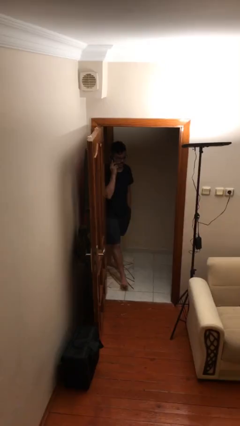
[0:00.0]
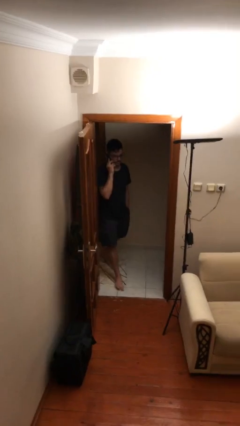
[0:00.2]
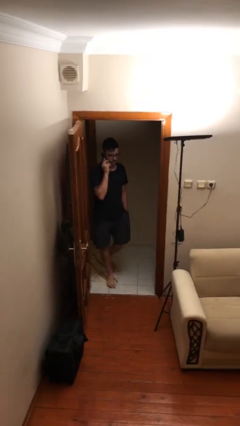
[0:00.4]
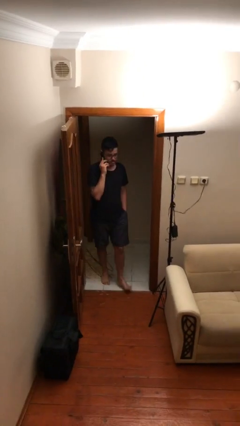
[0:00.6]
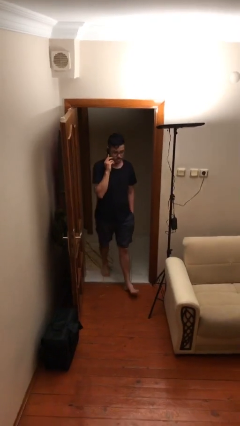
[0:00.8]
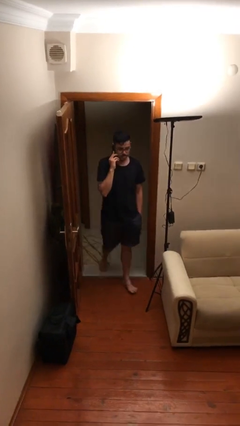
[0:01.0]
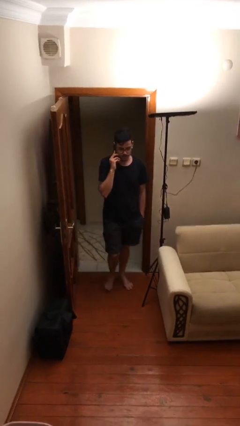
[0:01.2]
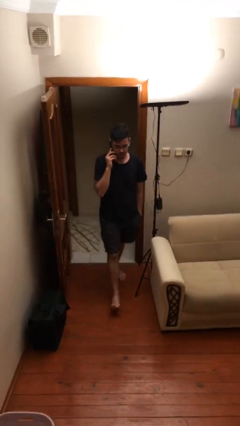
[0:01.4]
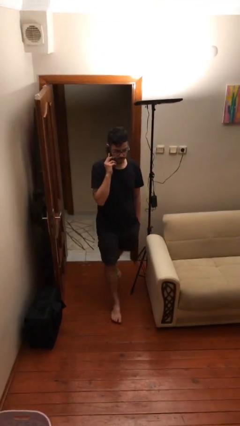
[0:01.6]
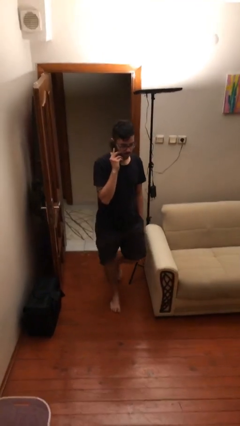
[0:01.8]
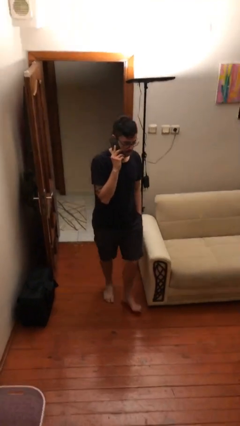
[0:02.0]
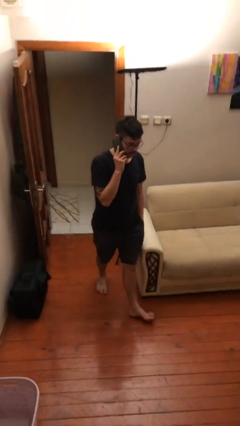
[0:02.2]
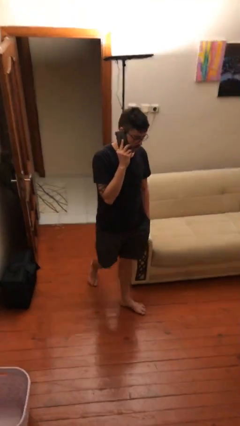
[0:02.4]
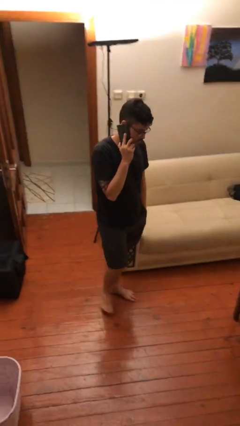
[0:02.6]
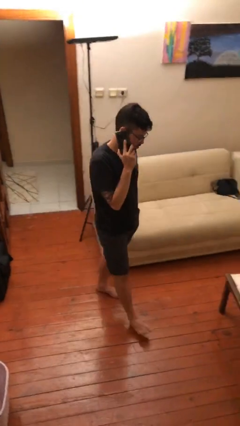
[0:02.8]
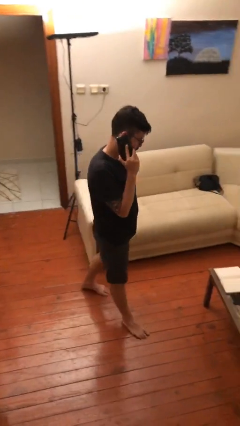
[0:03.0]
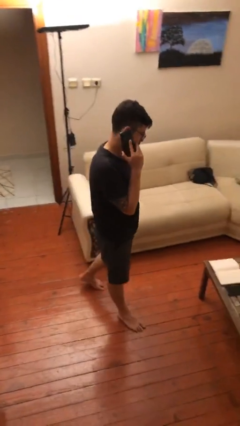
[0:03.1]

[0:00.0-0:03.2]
person enters scene through structure

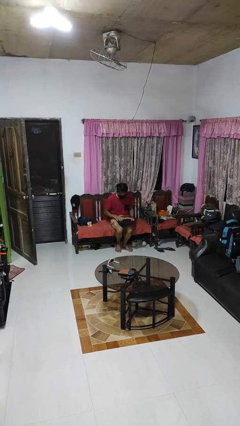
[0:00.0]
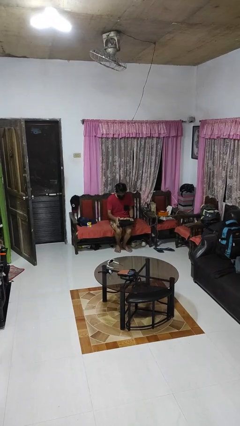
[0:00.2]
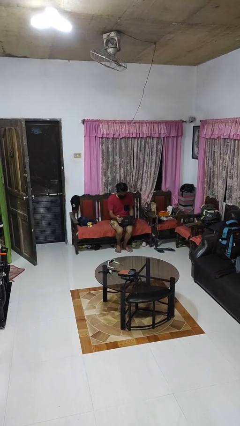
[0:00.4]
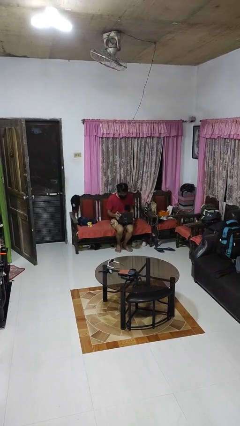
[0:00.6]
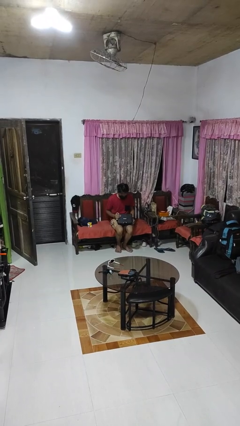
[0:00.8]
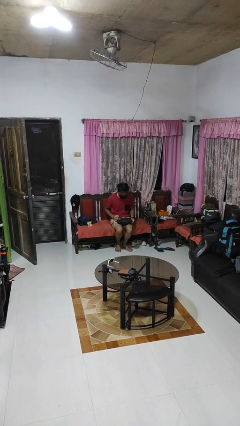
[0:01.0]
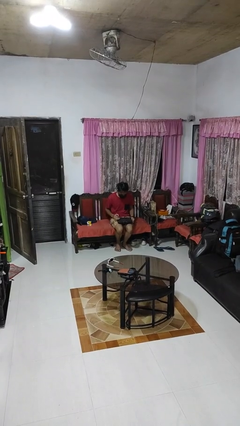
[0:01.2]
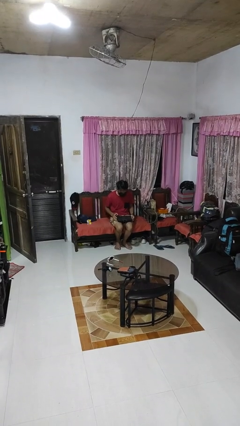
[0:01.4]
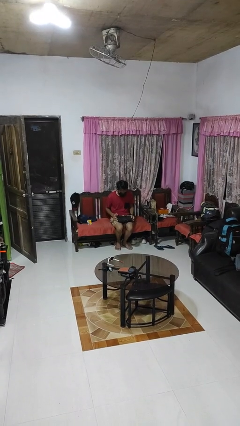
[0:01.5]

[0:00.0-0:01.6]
person closes laptop

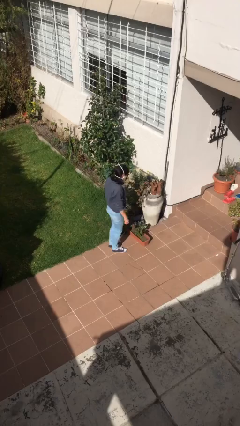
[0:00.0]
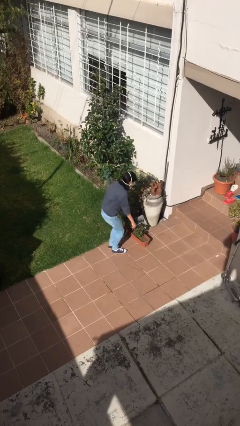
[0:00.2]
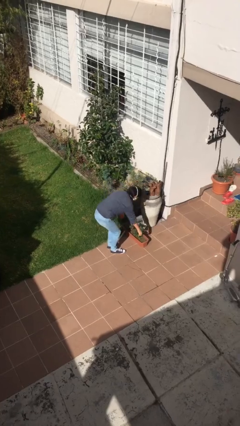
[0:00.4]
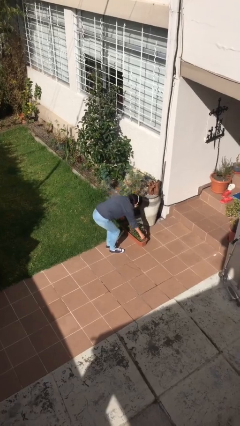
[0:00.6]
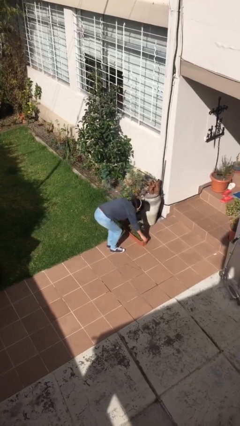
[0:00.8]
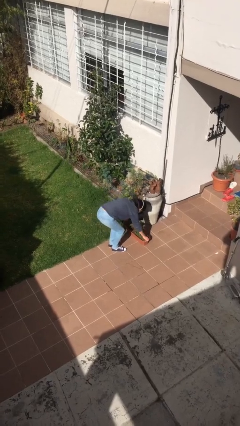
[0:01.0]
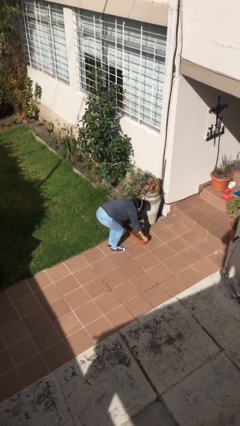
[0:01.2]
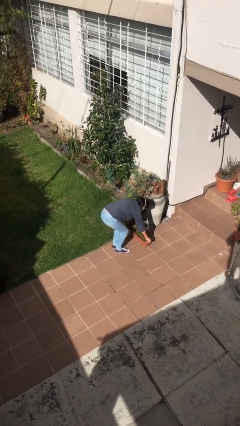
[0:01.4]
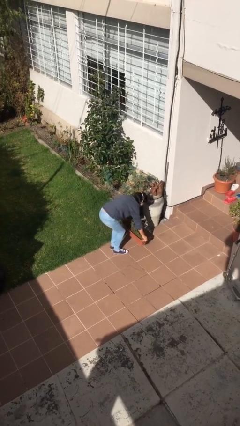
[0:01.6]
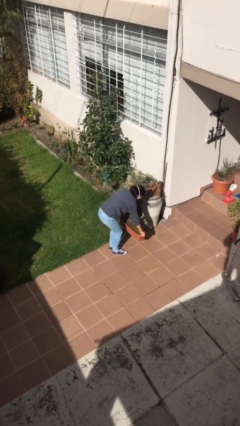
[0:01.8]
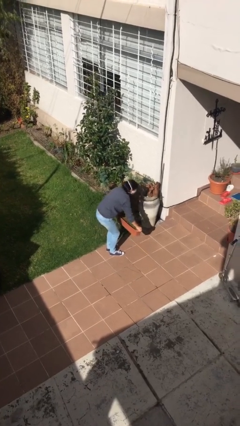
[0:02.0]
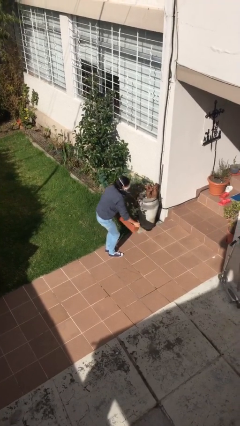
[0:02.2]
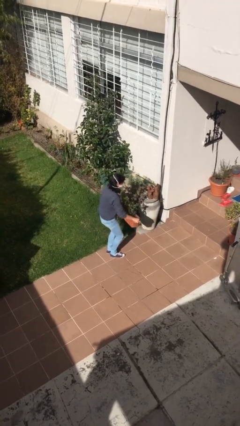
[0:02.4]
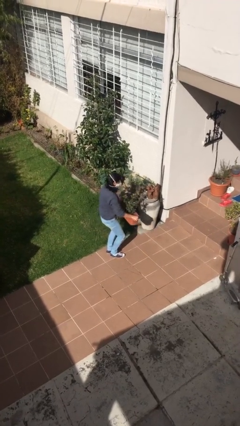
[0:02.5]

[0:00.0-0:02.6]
person picks up object from floor

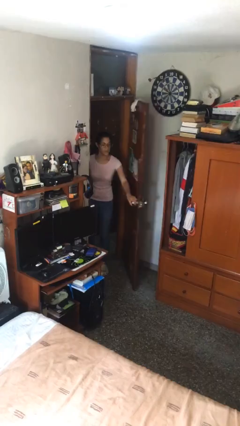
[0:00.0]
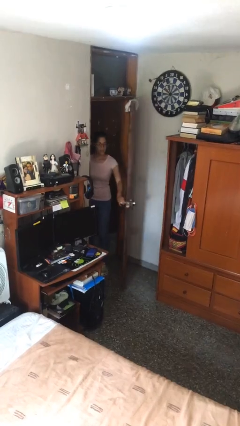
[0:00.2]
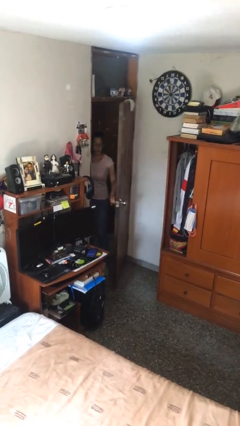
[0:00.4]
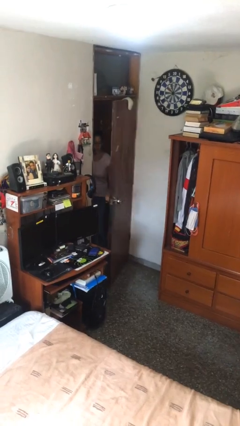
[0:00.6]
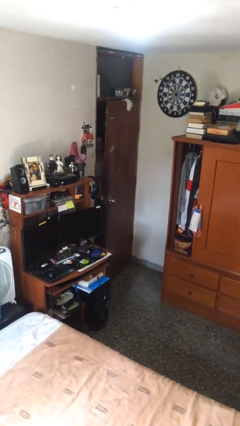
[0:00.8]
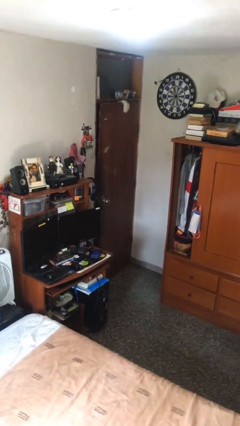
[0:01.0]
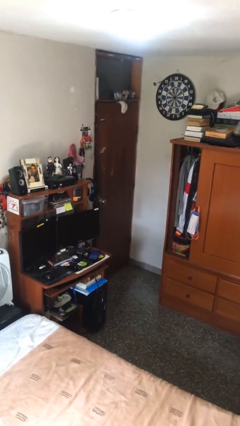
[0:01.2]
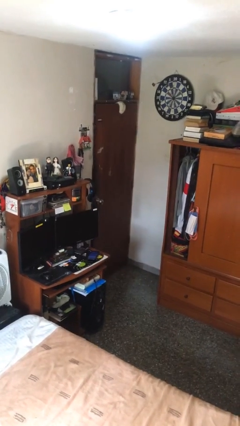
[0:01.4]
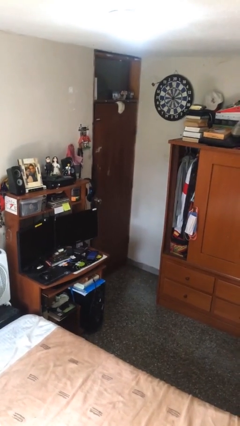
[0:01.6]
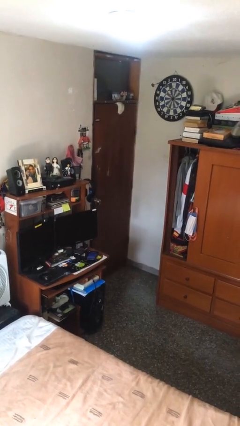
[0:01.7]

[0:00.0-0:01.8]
person closes facility door

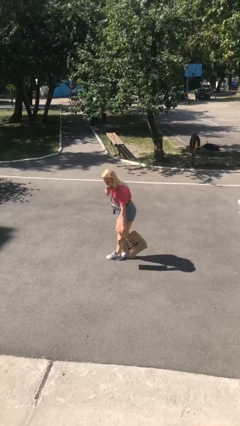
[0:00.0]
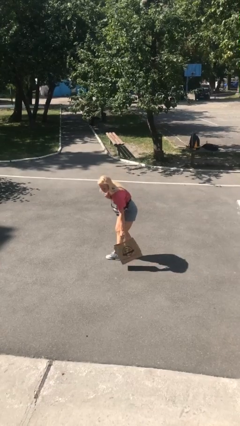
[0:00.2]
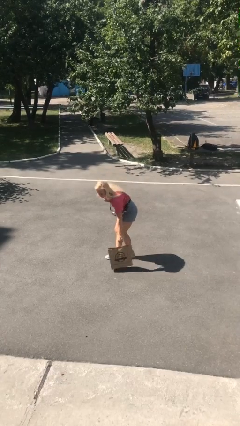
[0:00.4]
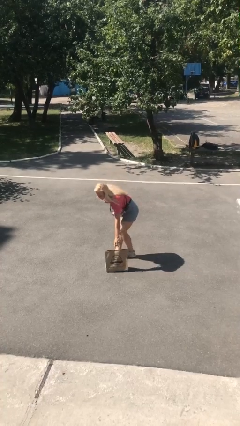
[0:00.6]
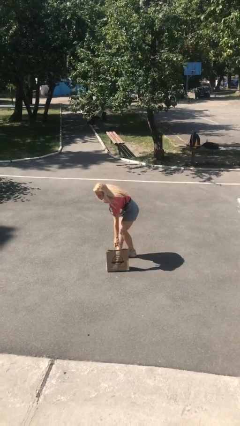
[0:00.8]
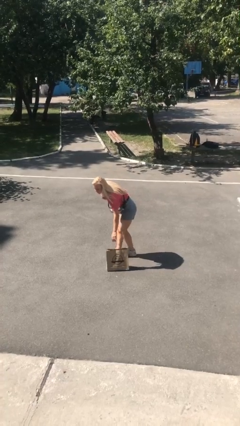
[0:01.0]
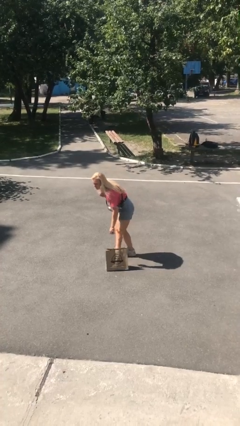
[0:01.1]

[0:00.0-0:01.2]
person puts down object on floor

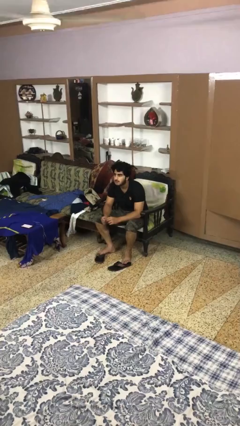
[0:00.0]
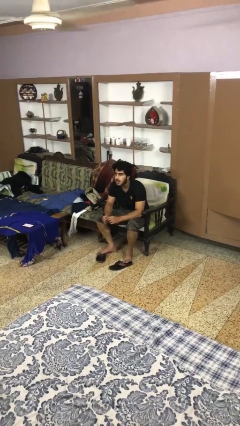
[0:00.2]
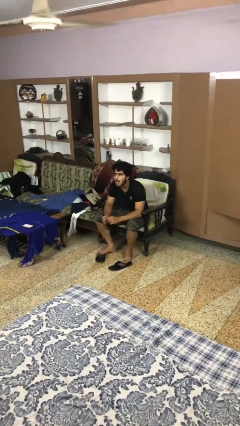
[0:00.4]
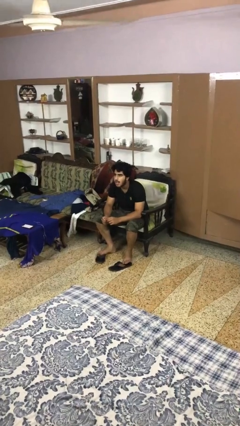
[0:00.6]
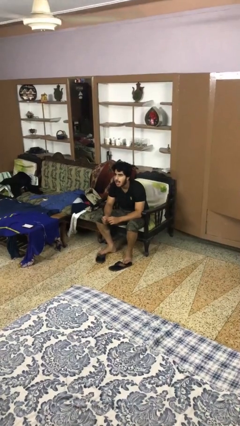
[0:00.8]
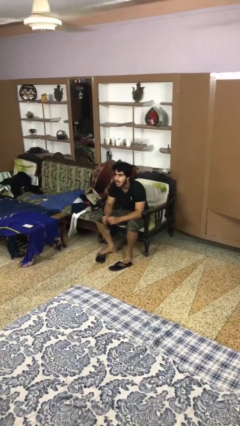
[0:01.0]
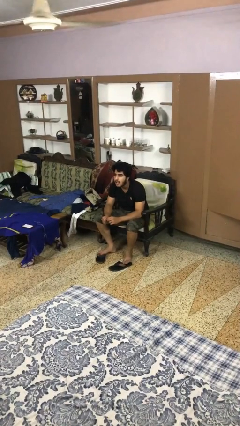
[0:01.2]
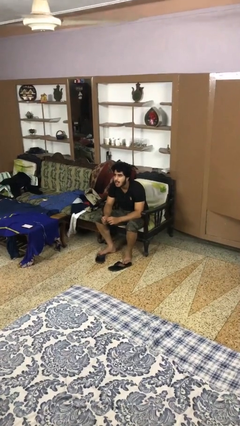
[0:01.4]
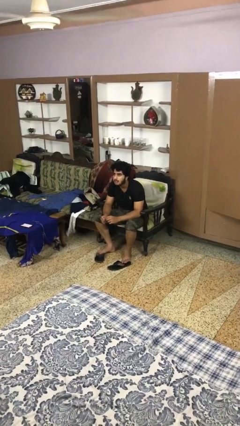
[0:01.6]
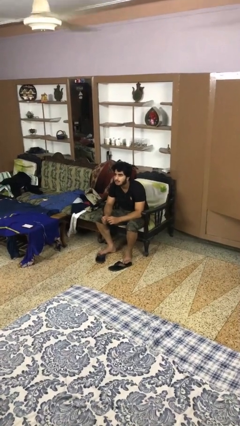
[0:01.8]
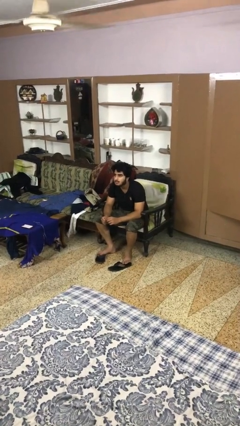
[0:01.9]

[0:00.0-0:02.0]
person sticks out tongue

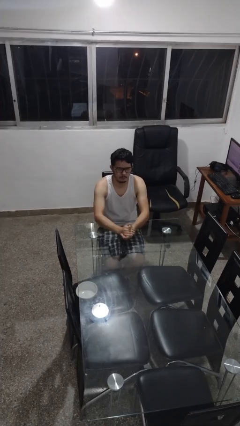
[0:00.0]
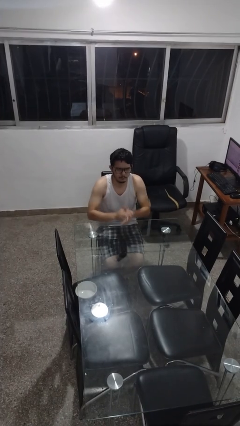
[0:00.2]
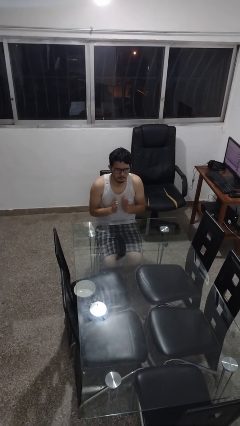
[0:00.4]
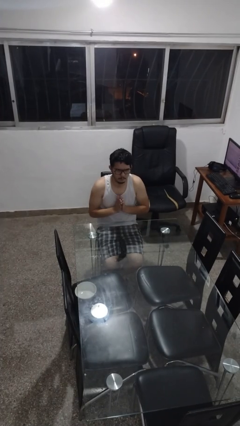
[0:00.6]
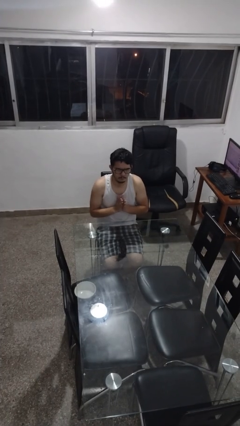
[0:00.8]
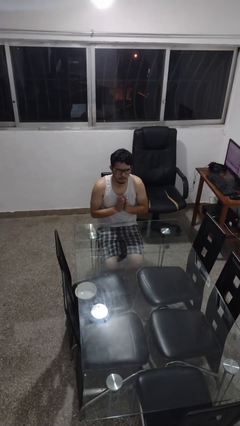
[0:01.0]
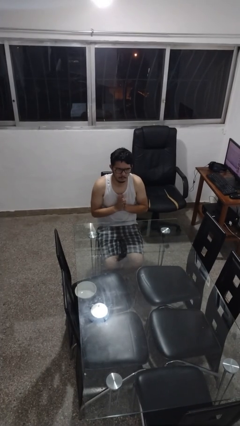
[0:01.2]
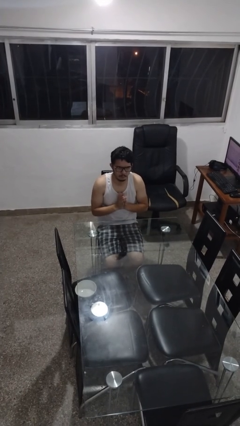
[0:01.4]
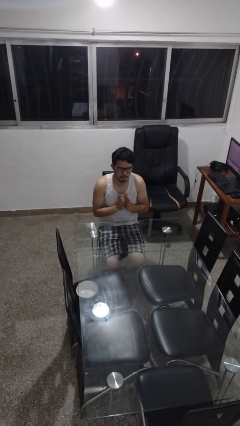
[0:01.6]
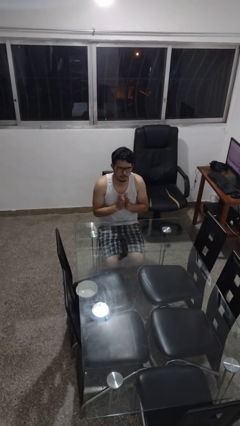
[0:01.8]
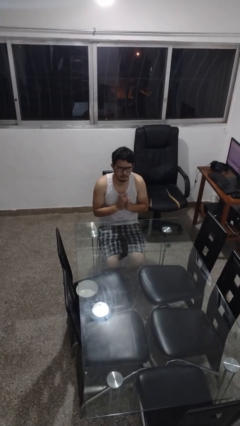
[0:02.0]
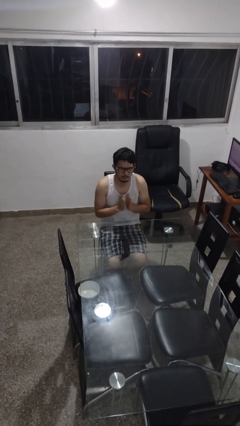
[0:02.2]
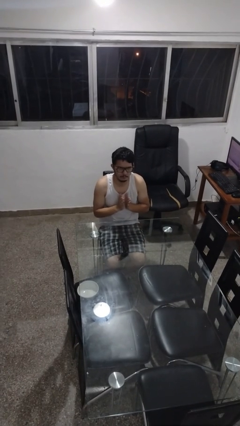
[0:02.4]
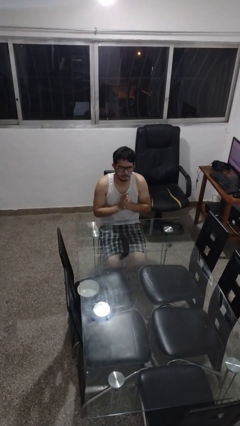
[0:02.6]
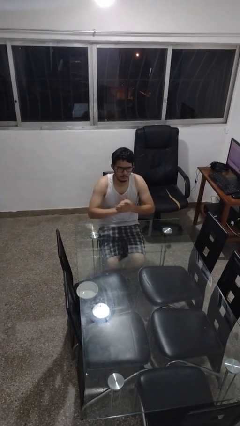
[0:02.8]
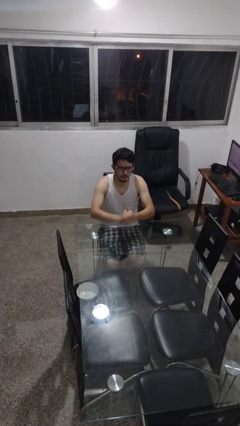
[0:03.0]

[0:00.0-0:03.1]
person claps hands

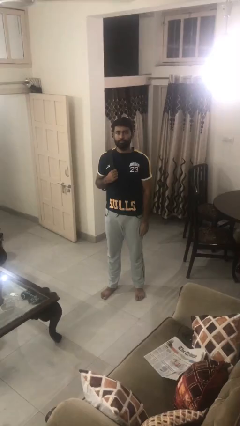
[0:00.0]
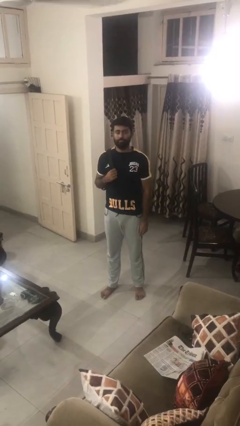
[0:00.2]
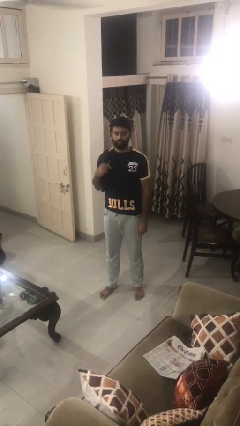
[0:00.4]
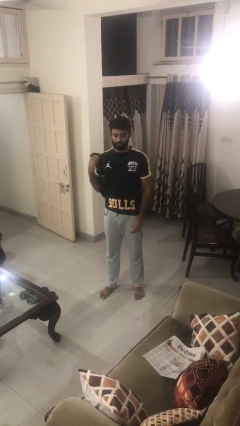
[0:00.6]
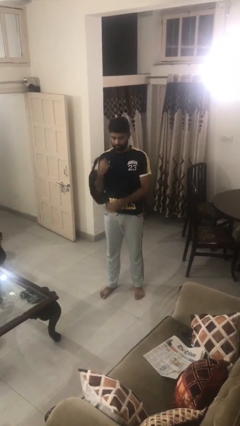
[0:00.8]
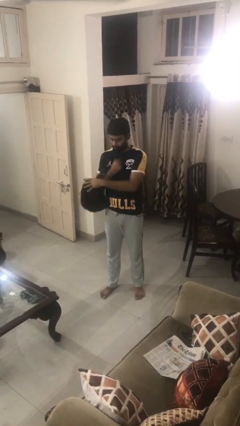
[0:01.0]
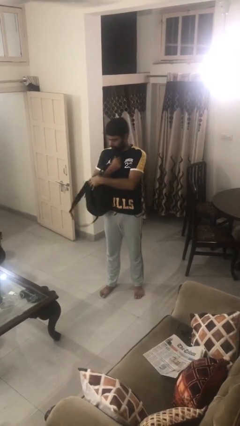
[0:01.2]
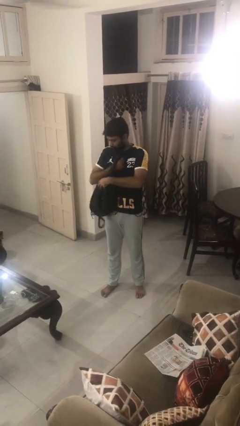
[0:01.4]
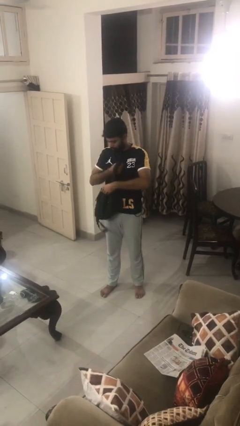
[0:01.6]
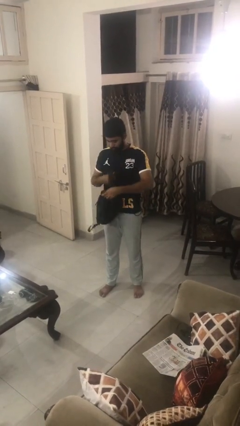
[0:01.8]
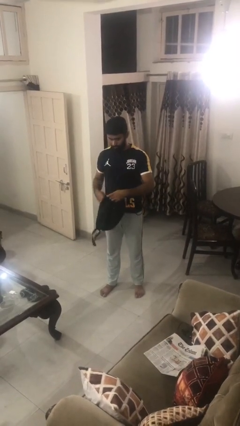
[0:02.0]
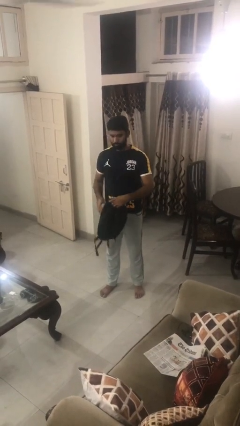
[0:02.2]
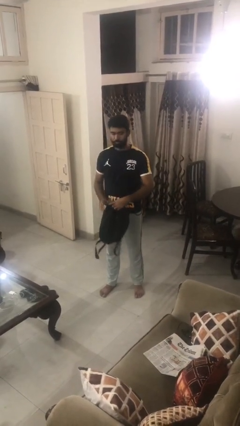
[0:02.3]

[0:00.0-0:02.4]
person takes off backpack
